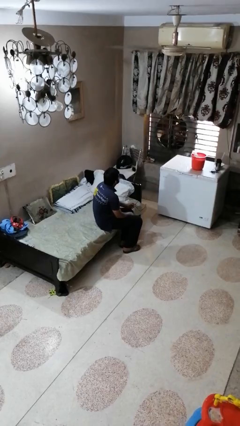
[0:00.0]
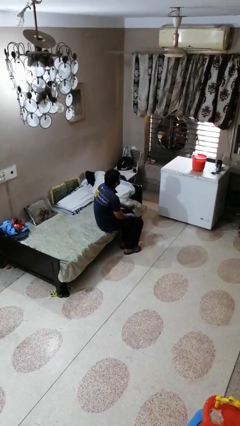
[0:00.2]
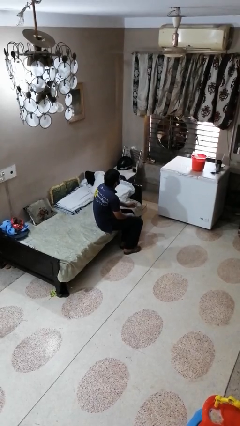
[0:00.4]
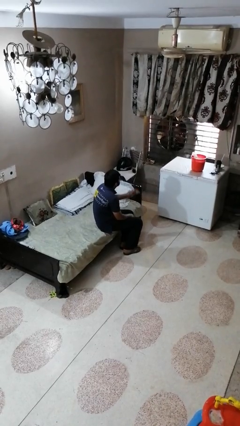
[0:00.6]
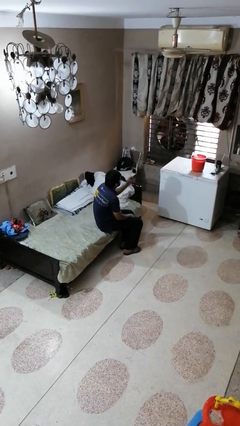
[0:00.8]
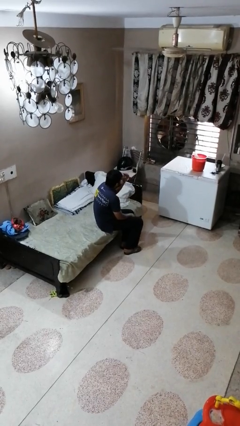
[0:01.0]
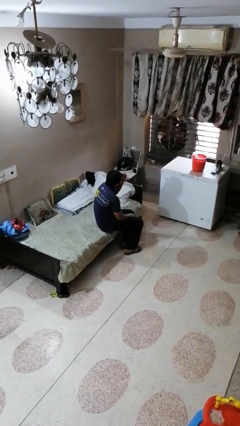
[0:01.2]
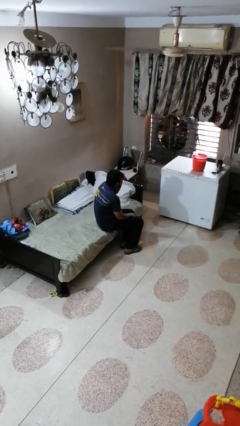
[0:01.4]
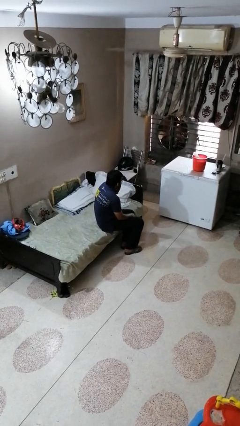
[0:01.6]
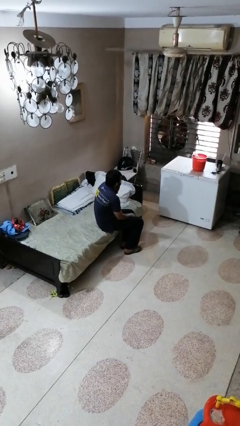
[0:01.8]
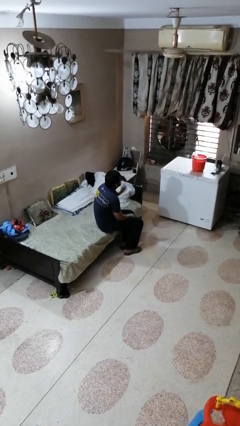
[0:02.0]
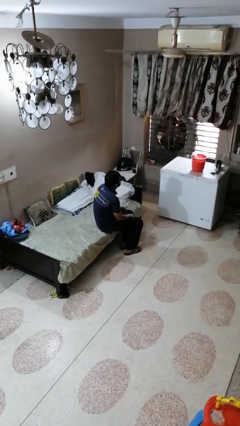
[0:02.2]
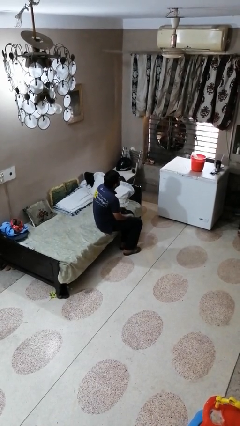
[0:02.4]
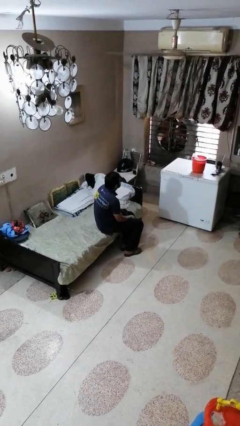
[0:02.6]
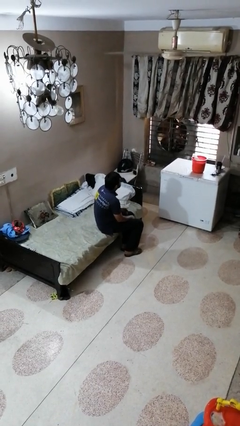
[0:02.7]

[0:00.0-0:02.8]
person puts on glasses

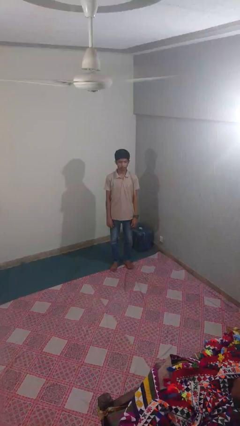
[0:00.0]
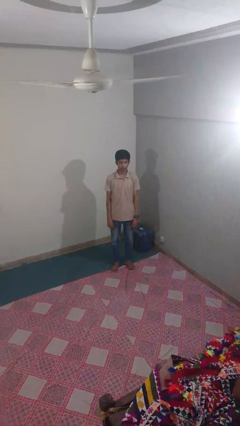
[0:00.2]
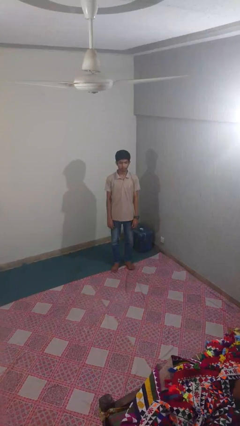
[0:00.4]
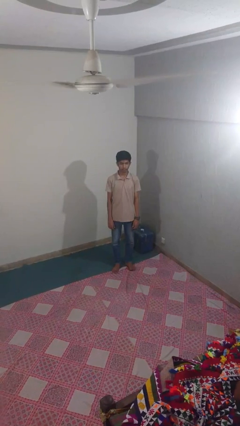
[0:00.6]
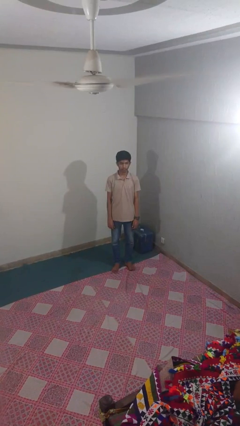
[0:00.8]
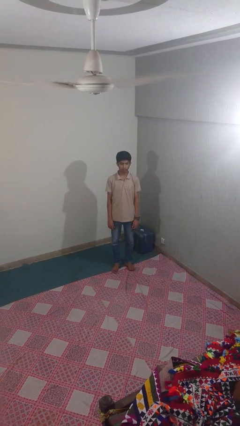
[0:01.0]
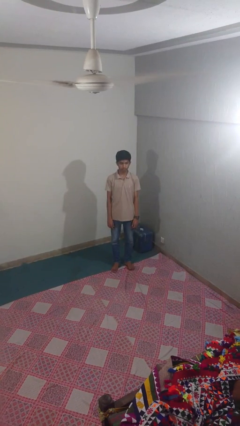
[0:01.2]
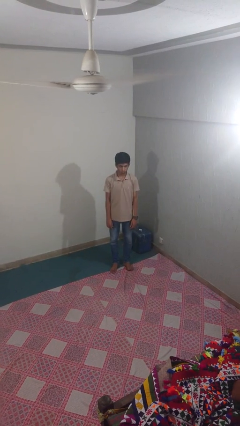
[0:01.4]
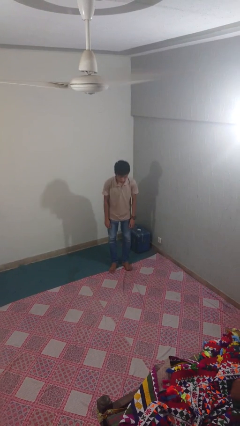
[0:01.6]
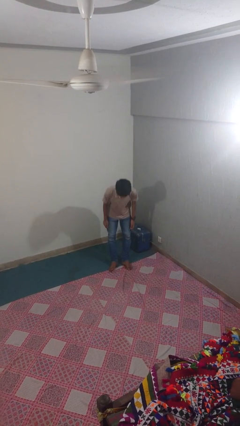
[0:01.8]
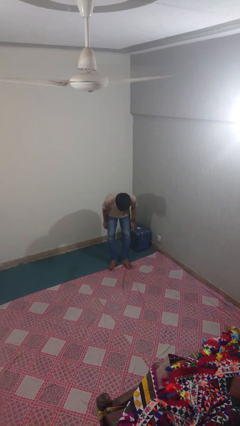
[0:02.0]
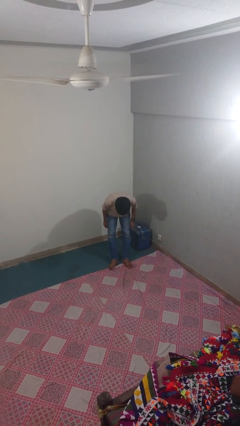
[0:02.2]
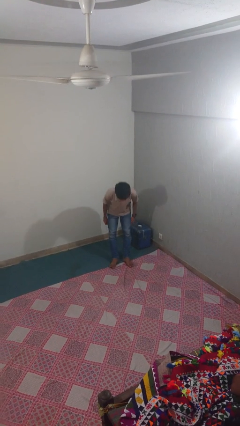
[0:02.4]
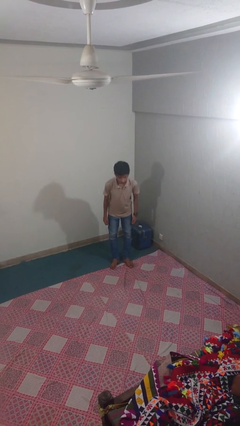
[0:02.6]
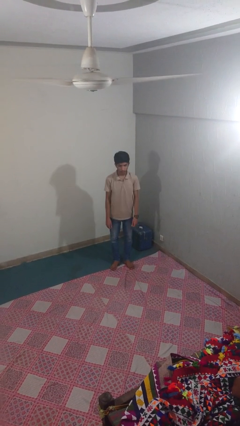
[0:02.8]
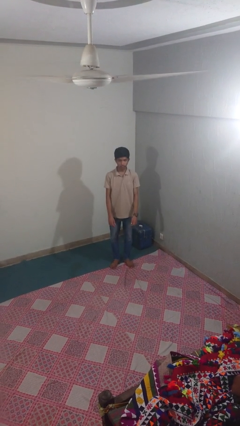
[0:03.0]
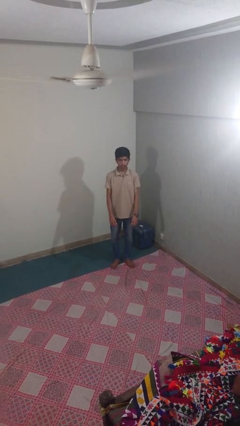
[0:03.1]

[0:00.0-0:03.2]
person bows

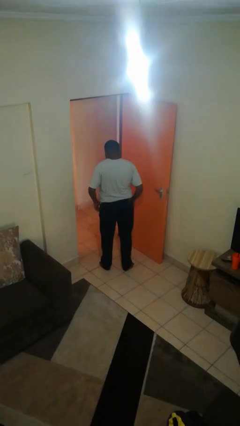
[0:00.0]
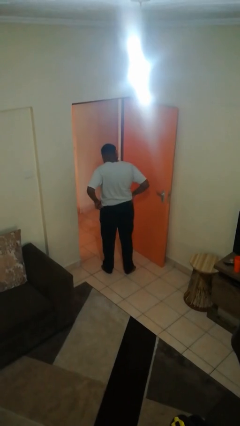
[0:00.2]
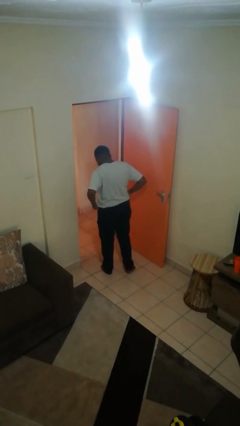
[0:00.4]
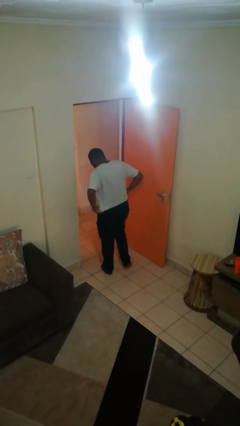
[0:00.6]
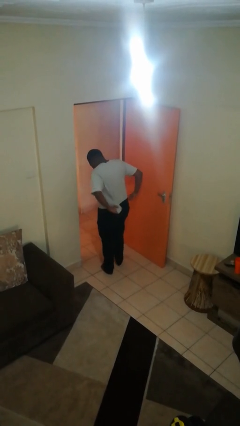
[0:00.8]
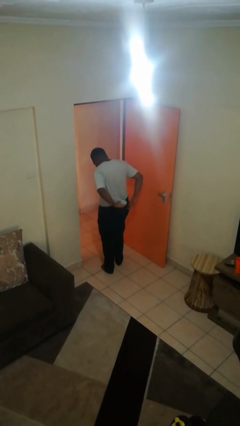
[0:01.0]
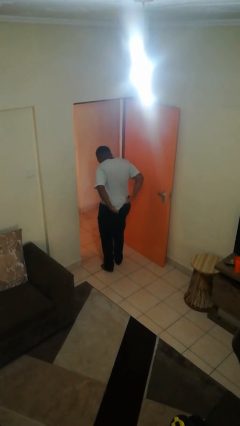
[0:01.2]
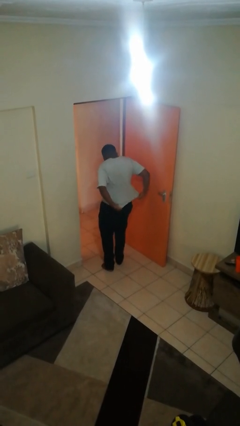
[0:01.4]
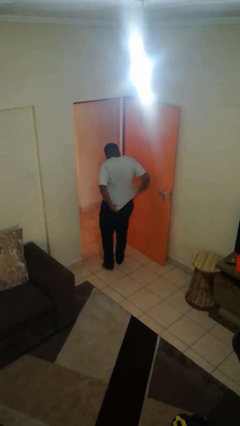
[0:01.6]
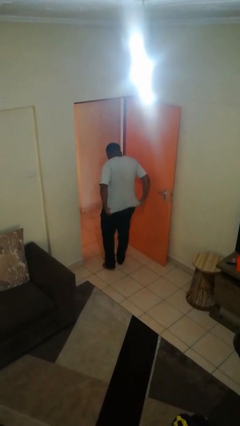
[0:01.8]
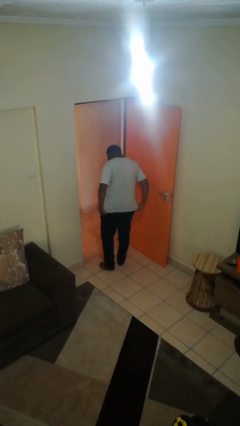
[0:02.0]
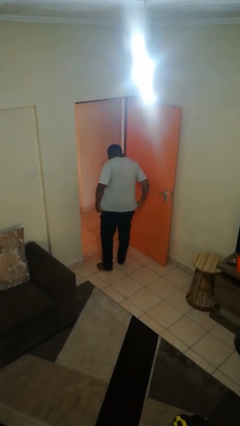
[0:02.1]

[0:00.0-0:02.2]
person untucks shirt

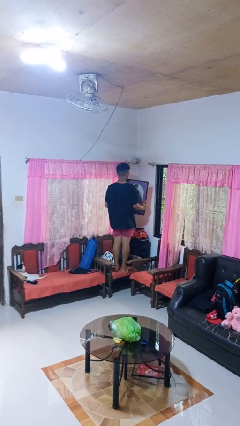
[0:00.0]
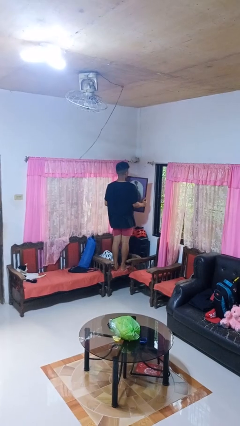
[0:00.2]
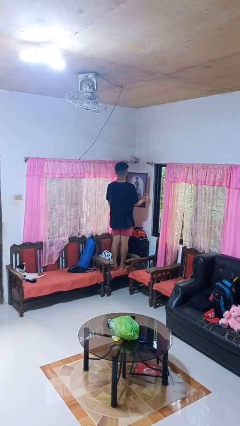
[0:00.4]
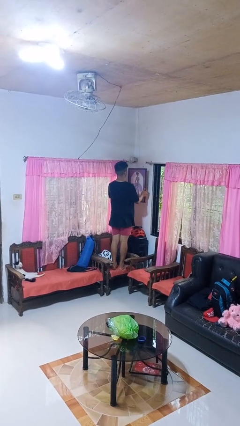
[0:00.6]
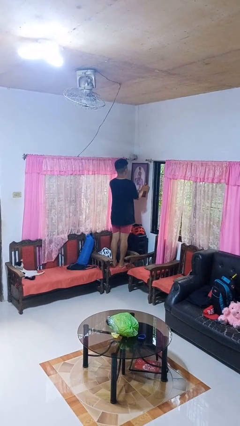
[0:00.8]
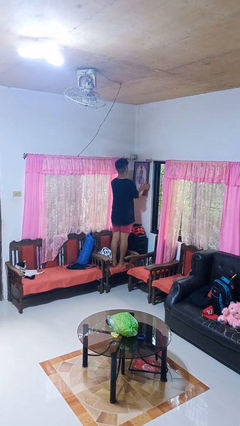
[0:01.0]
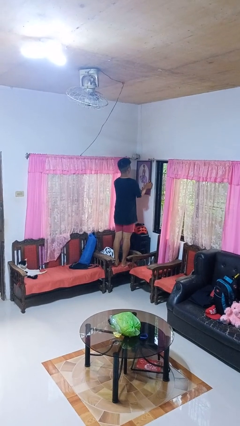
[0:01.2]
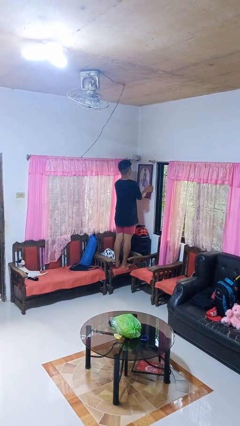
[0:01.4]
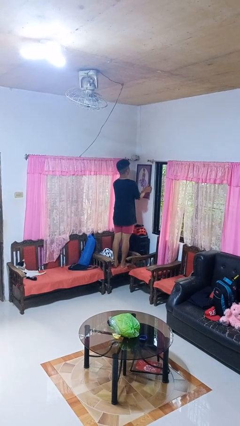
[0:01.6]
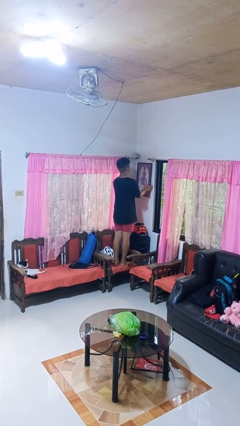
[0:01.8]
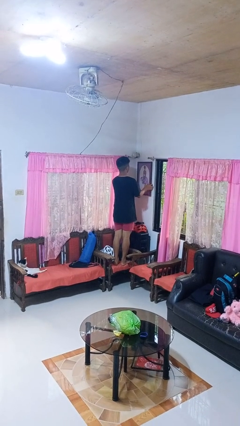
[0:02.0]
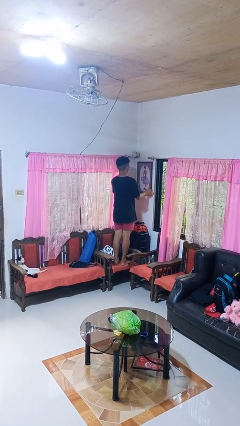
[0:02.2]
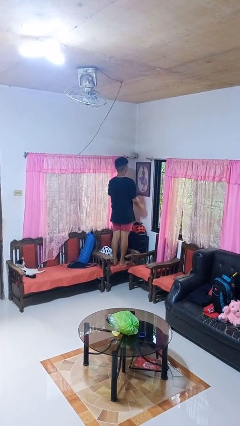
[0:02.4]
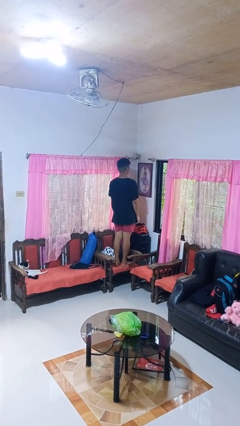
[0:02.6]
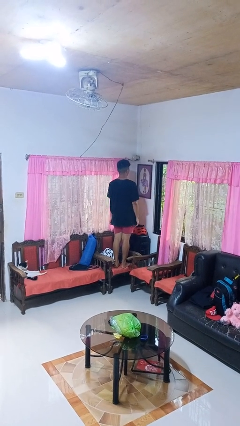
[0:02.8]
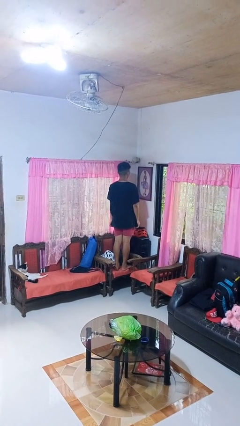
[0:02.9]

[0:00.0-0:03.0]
person puts up picture frame

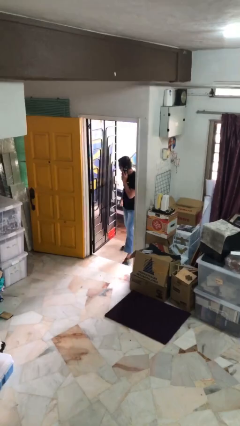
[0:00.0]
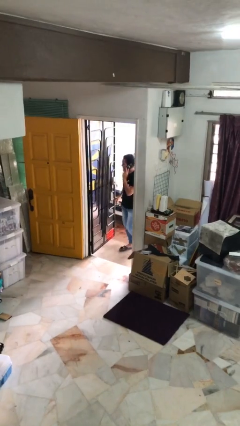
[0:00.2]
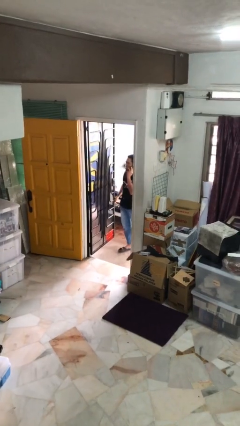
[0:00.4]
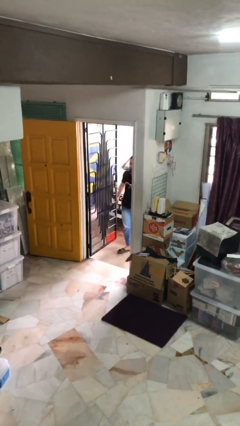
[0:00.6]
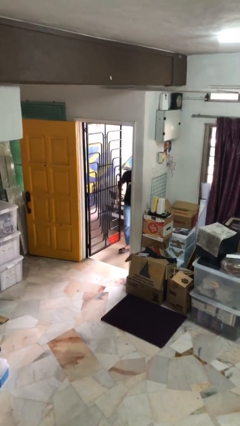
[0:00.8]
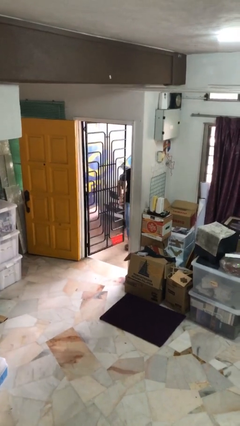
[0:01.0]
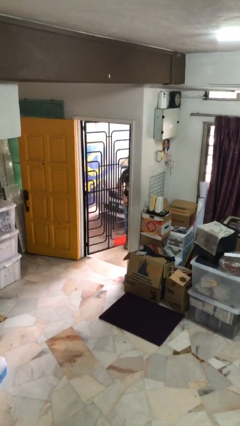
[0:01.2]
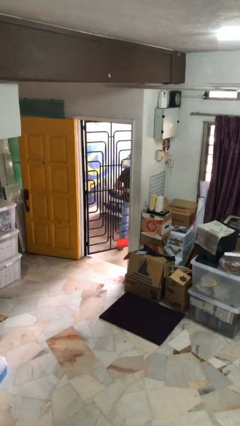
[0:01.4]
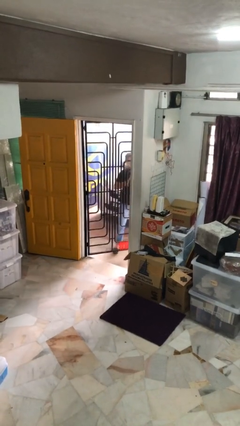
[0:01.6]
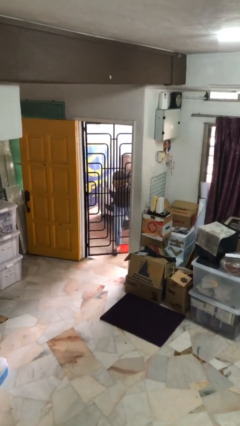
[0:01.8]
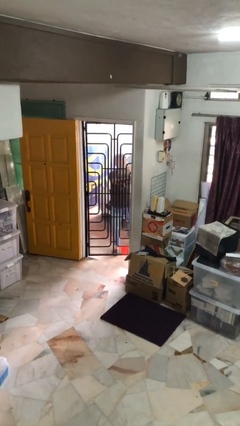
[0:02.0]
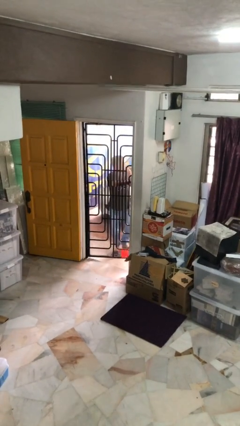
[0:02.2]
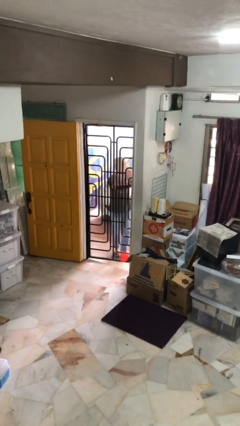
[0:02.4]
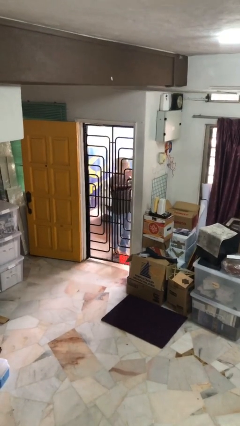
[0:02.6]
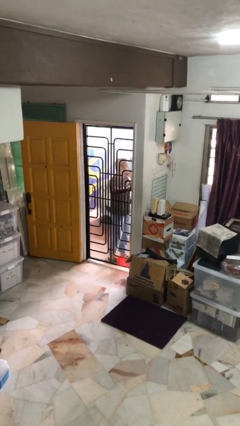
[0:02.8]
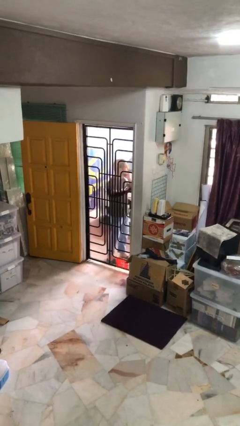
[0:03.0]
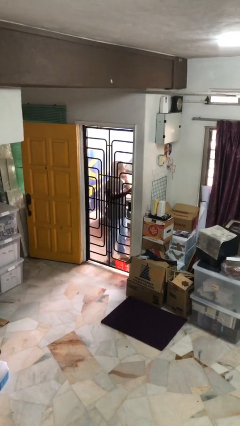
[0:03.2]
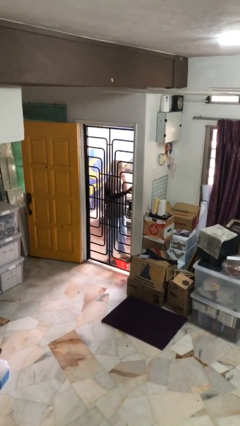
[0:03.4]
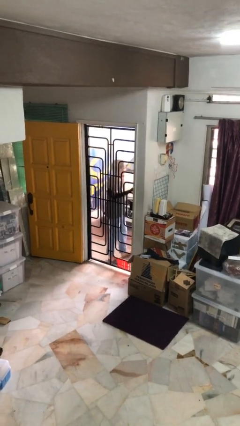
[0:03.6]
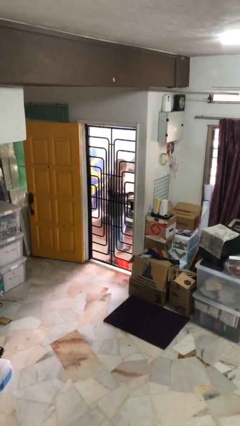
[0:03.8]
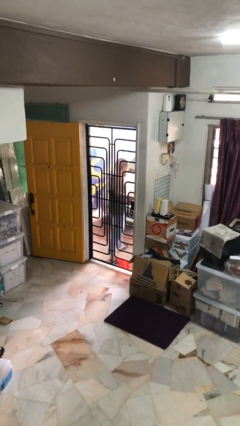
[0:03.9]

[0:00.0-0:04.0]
person closes facility door

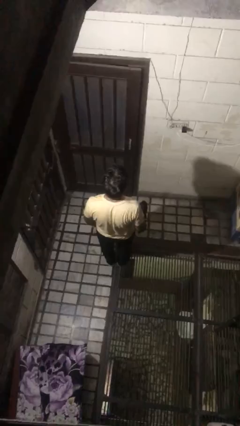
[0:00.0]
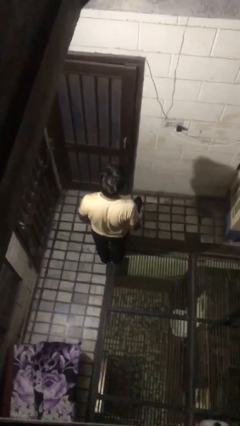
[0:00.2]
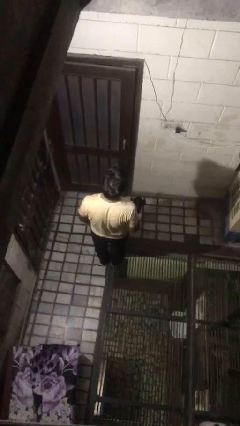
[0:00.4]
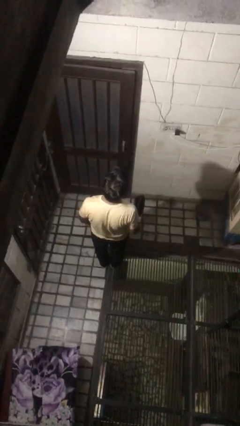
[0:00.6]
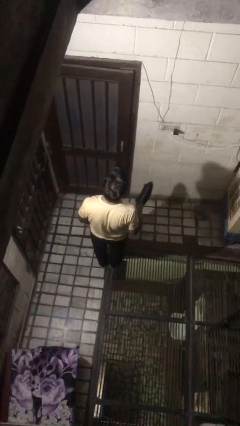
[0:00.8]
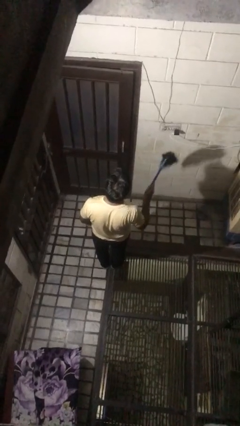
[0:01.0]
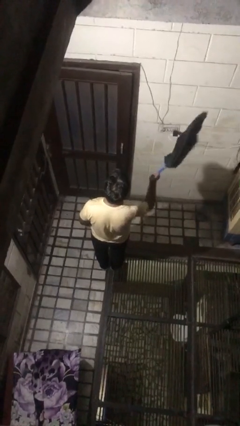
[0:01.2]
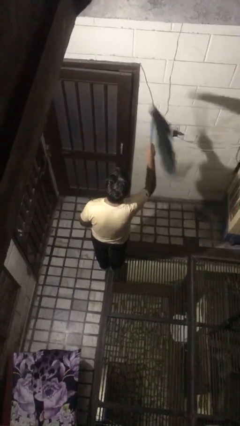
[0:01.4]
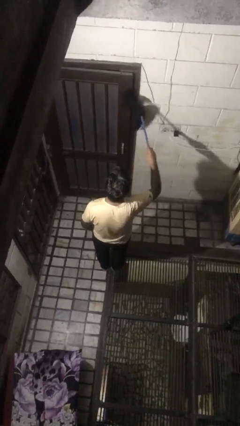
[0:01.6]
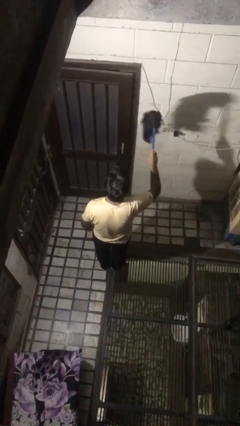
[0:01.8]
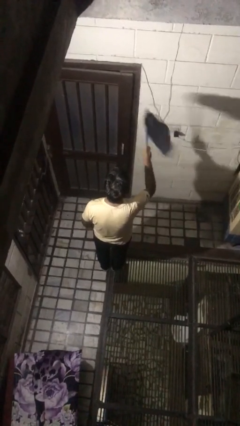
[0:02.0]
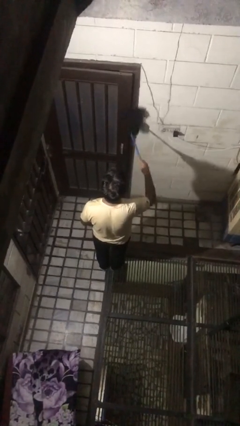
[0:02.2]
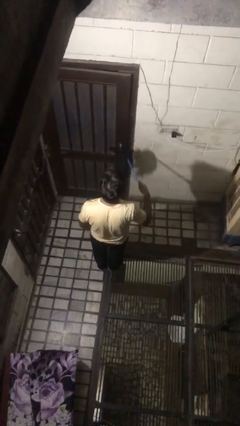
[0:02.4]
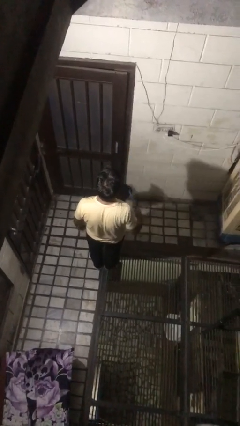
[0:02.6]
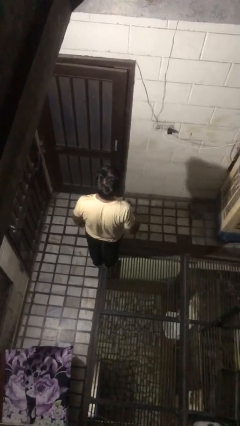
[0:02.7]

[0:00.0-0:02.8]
person dusts furniture
